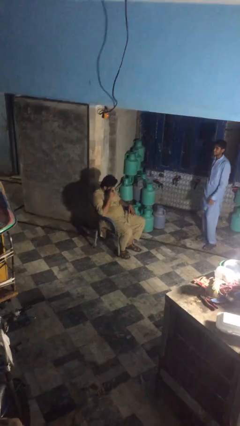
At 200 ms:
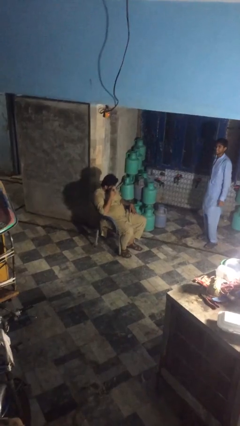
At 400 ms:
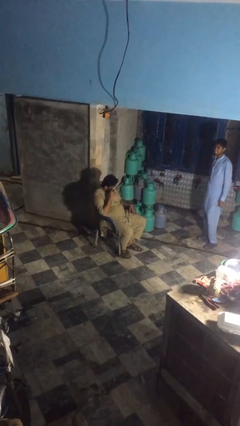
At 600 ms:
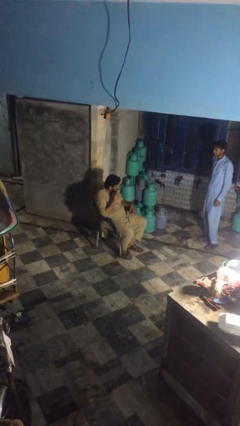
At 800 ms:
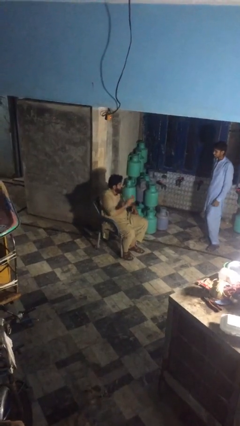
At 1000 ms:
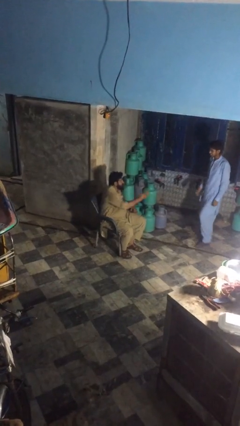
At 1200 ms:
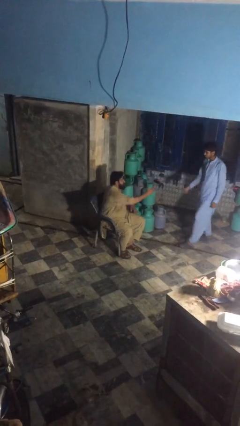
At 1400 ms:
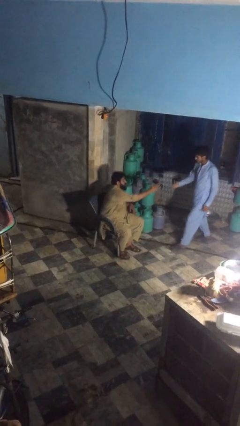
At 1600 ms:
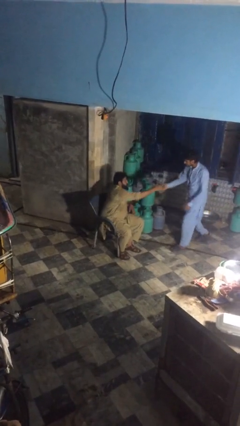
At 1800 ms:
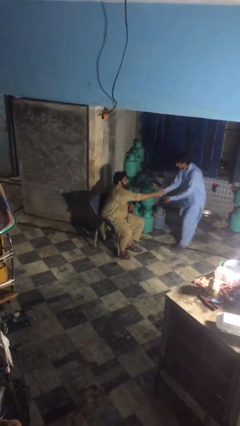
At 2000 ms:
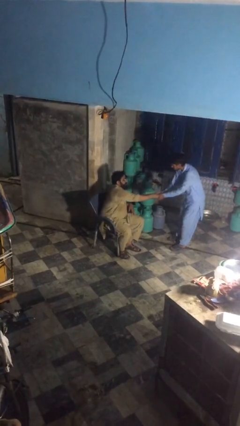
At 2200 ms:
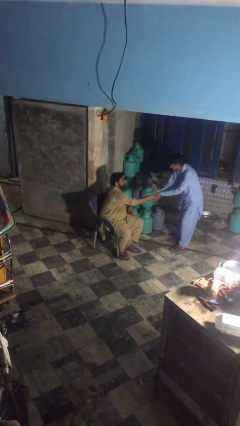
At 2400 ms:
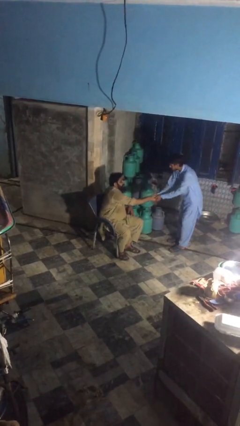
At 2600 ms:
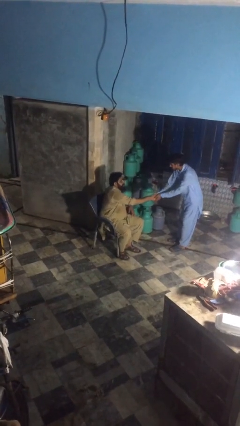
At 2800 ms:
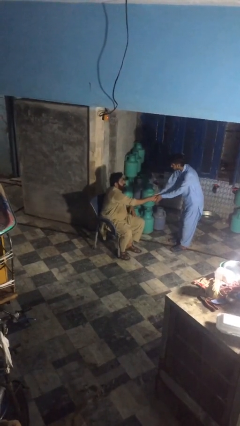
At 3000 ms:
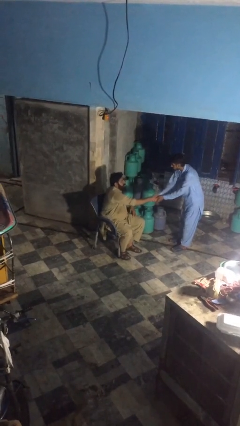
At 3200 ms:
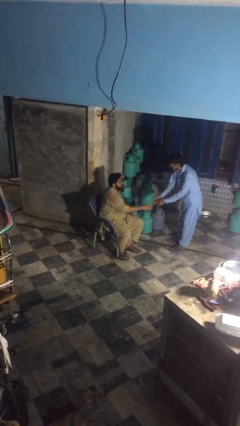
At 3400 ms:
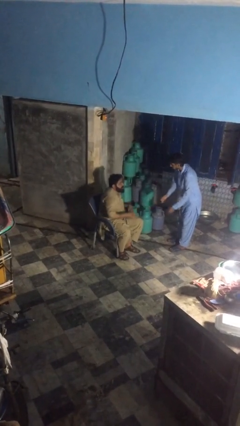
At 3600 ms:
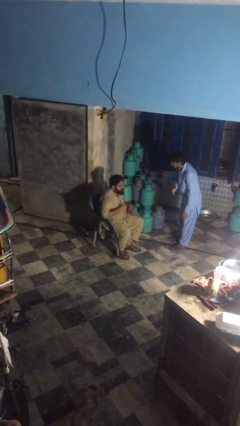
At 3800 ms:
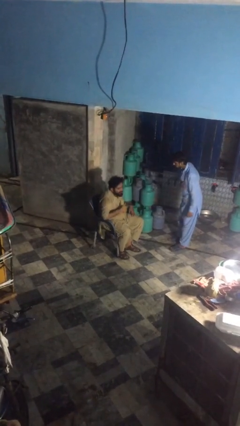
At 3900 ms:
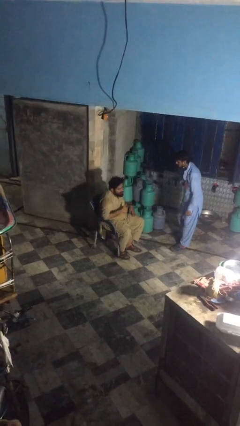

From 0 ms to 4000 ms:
person shakes hand

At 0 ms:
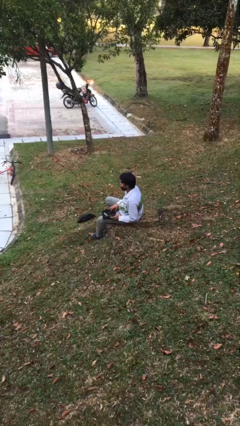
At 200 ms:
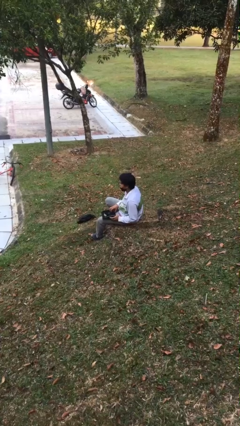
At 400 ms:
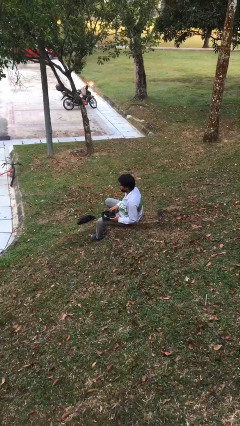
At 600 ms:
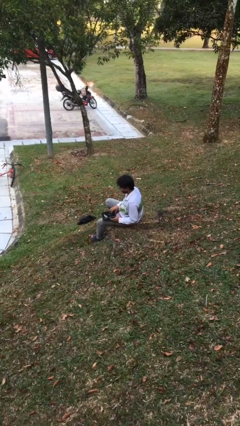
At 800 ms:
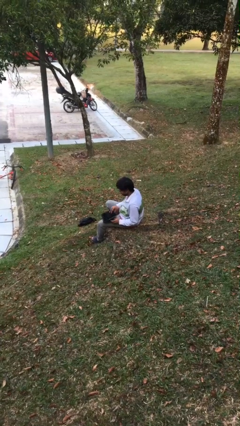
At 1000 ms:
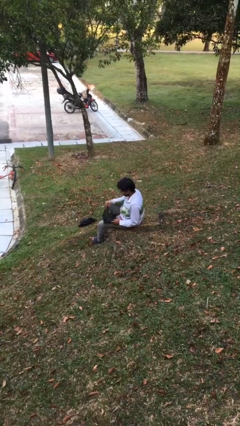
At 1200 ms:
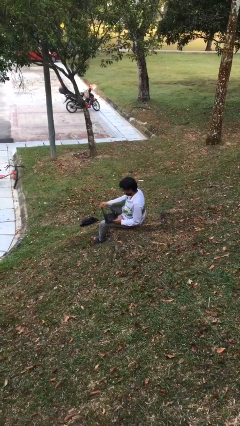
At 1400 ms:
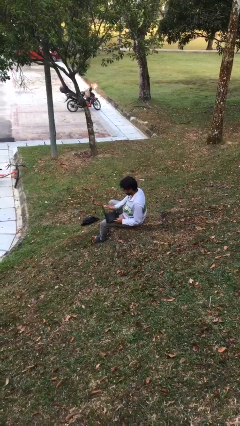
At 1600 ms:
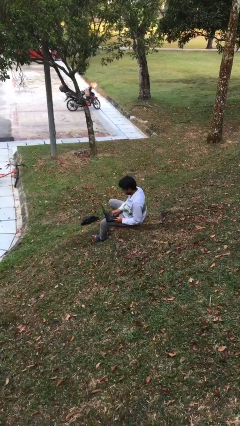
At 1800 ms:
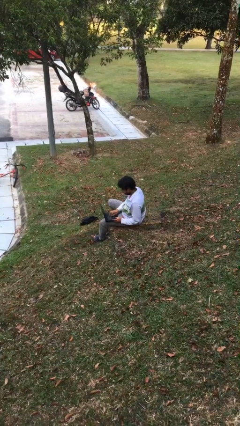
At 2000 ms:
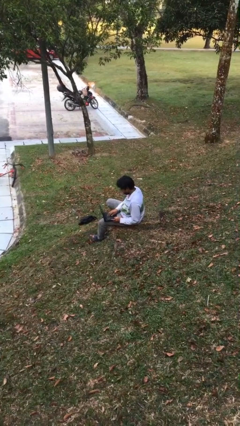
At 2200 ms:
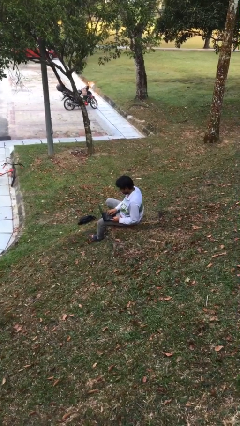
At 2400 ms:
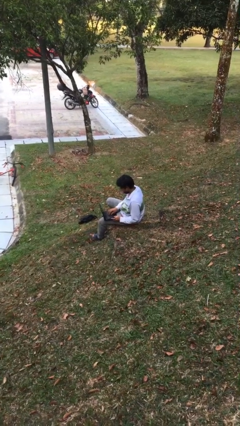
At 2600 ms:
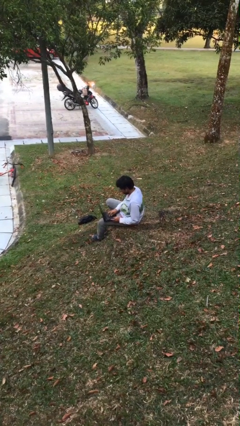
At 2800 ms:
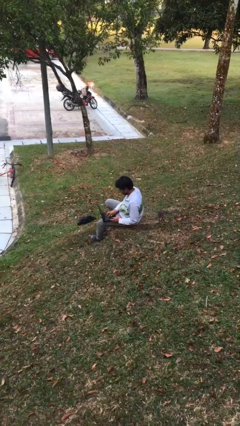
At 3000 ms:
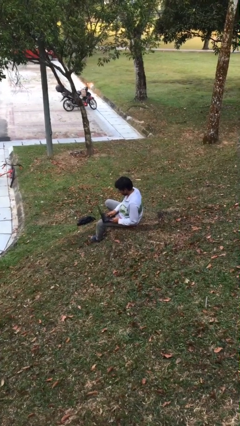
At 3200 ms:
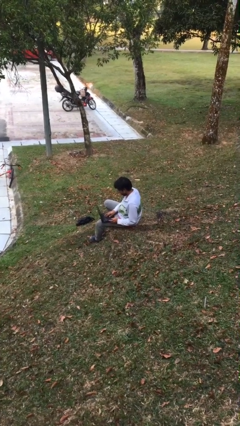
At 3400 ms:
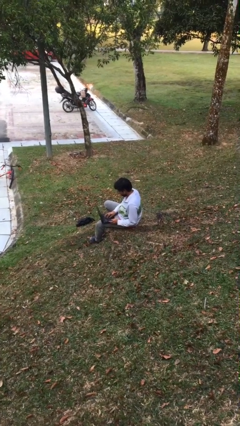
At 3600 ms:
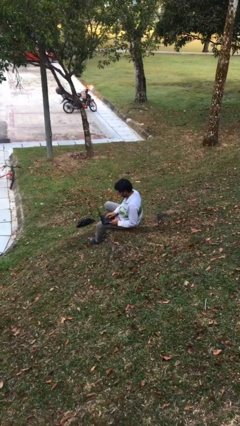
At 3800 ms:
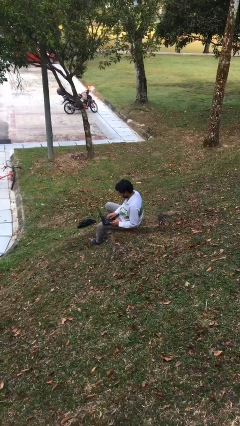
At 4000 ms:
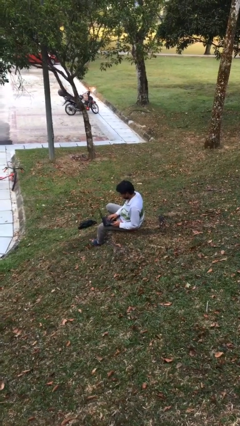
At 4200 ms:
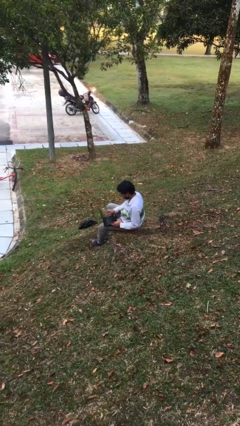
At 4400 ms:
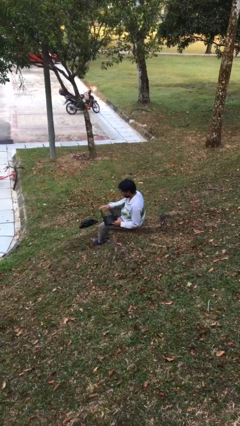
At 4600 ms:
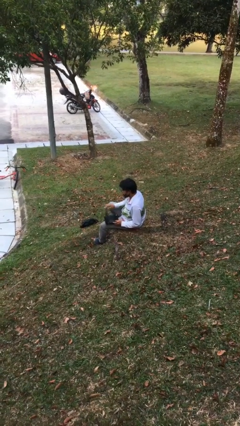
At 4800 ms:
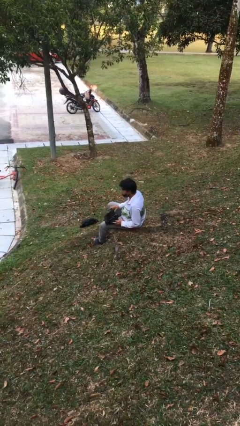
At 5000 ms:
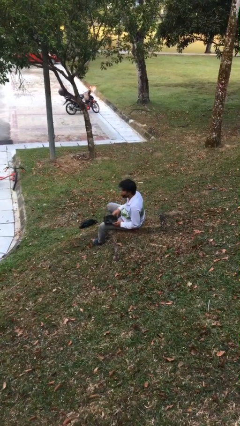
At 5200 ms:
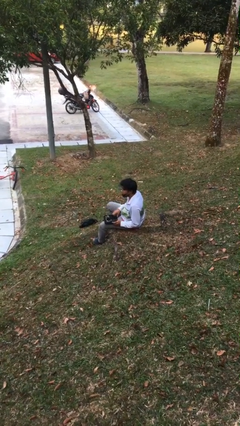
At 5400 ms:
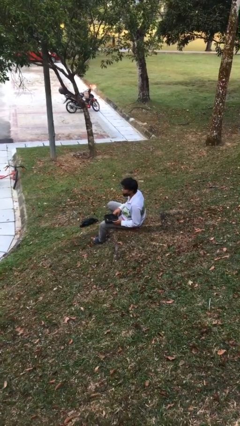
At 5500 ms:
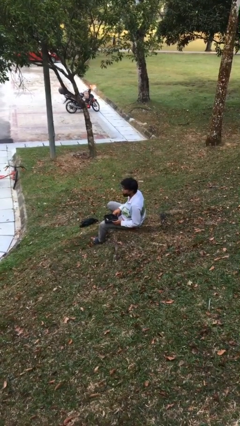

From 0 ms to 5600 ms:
person interacts with laptop

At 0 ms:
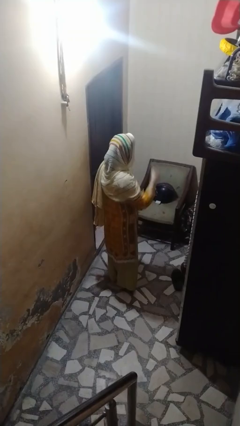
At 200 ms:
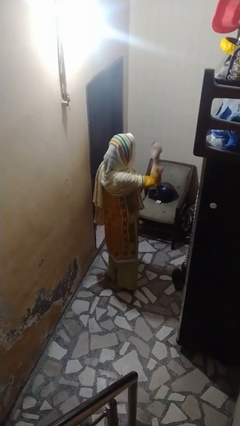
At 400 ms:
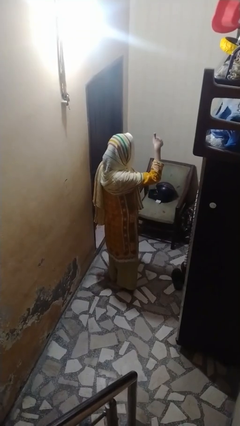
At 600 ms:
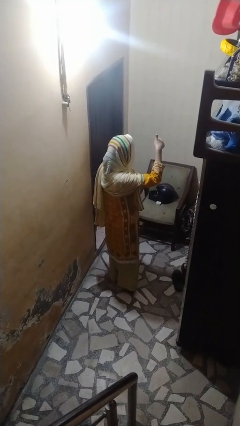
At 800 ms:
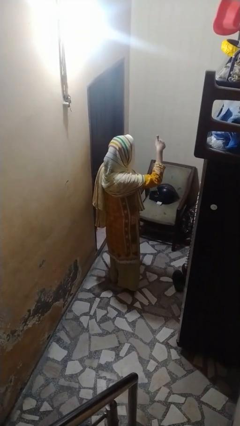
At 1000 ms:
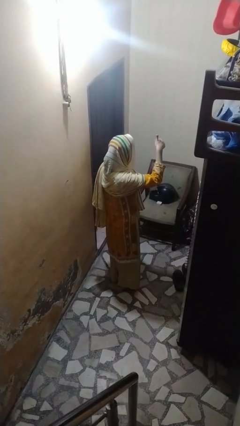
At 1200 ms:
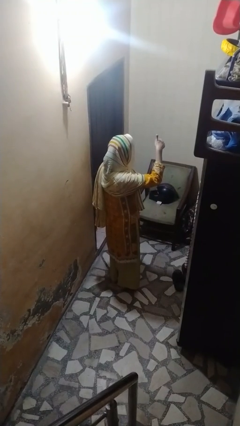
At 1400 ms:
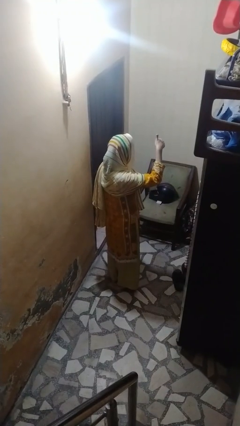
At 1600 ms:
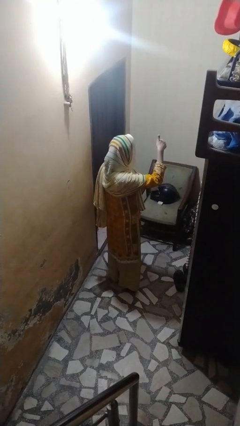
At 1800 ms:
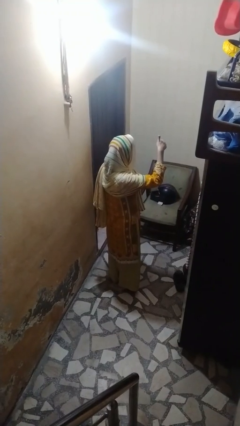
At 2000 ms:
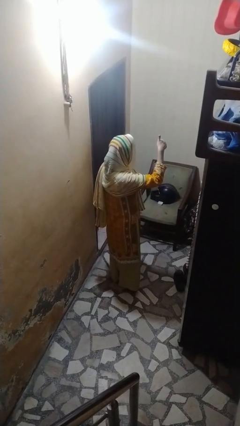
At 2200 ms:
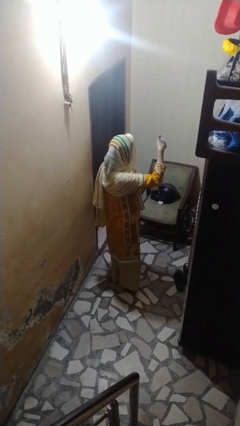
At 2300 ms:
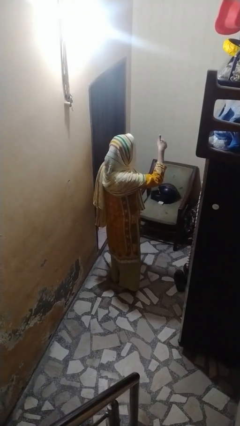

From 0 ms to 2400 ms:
person gestures thumbs up

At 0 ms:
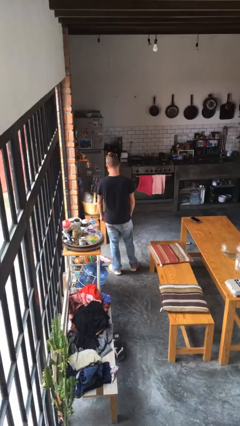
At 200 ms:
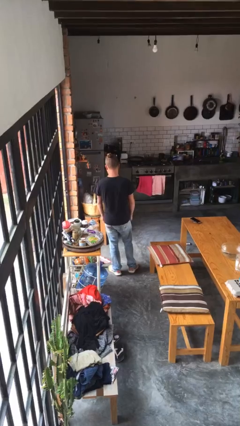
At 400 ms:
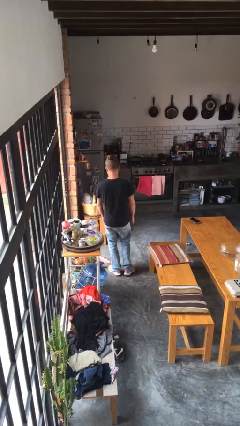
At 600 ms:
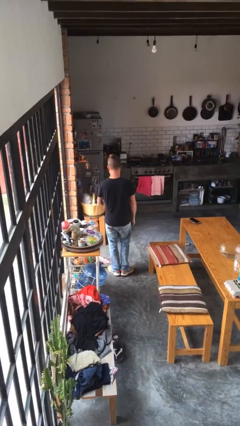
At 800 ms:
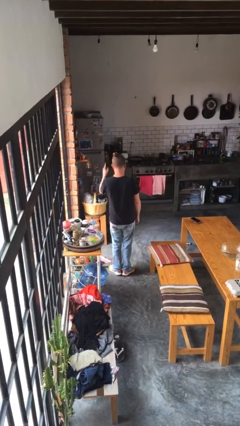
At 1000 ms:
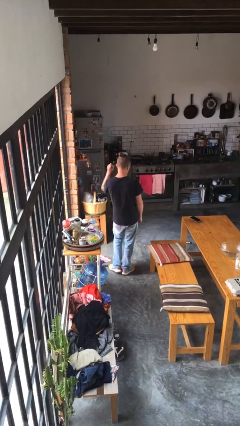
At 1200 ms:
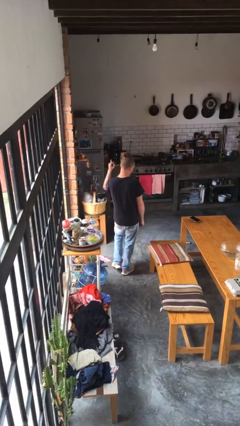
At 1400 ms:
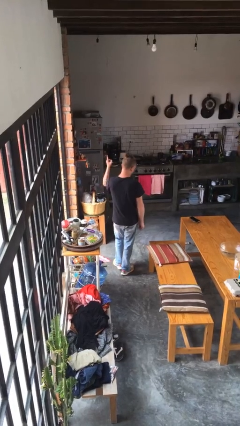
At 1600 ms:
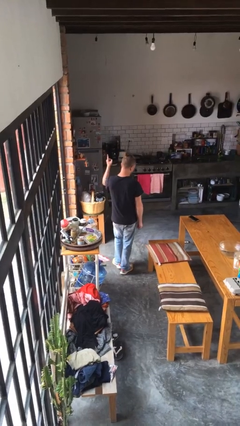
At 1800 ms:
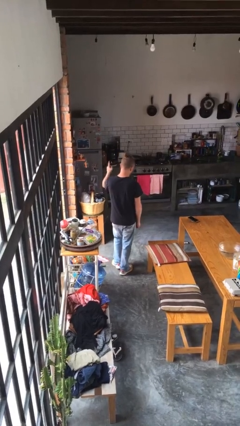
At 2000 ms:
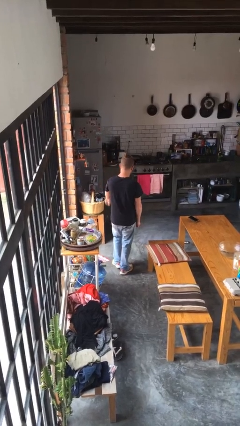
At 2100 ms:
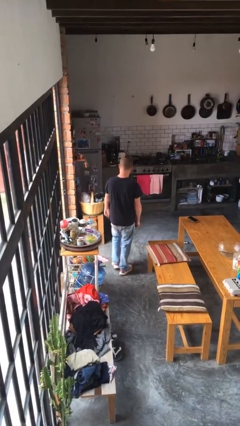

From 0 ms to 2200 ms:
person gestures number one

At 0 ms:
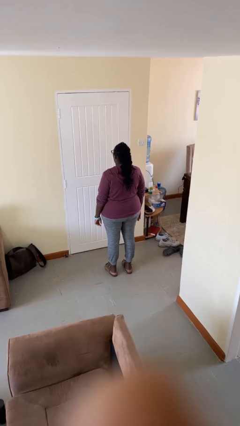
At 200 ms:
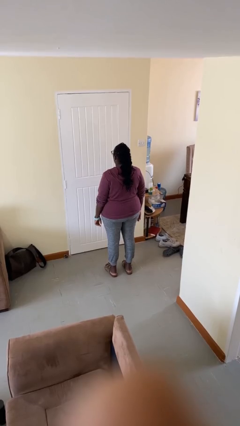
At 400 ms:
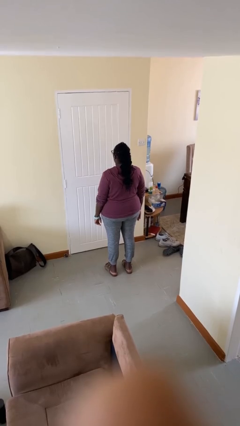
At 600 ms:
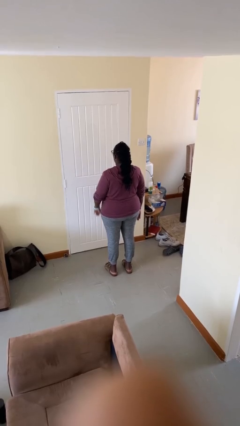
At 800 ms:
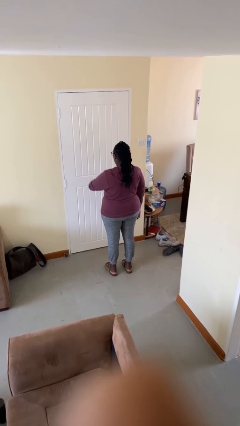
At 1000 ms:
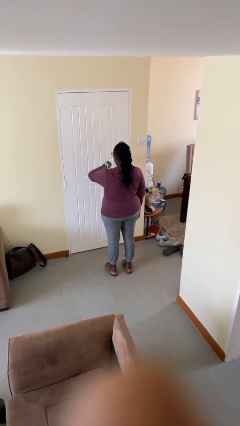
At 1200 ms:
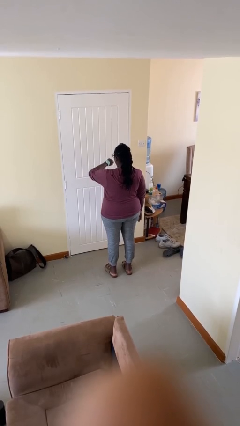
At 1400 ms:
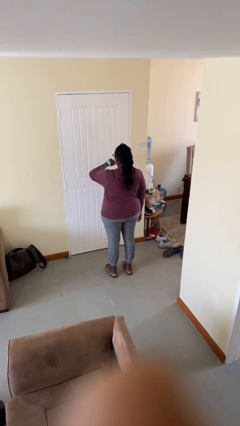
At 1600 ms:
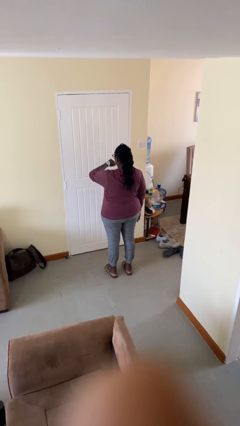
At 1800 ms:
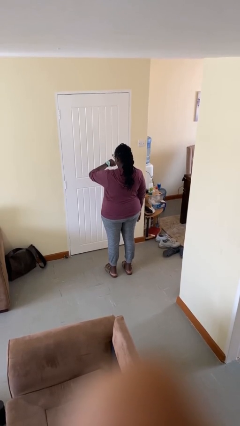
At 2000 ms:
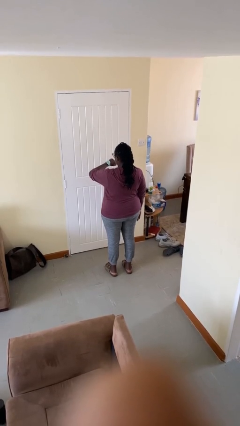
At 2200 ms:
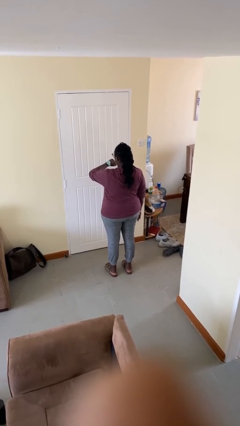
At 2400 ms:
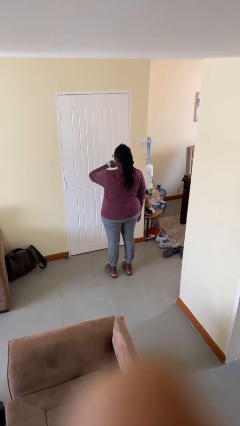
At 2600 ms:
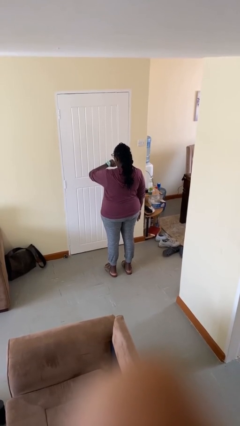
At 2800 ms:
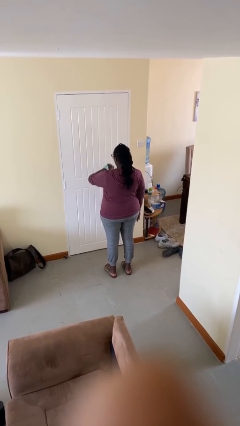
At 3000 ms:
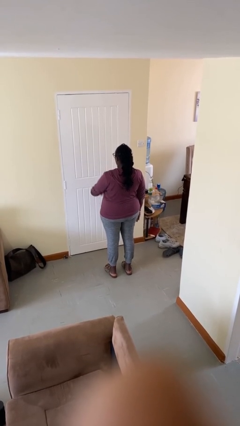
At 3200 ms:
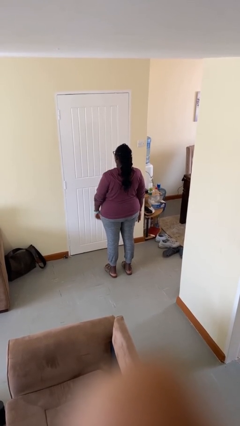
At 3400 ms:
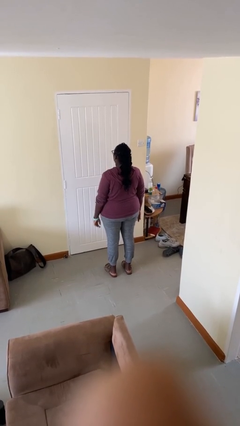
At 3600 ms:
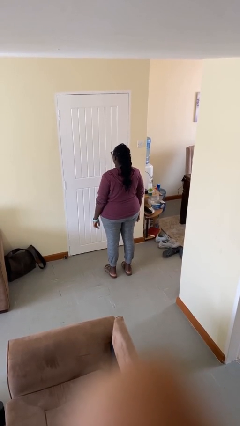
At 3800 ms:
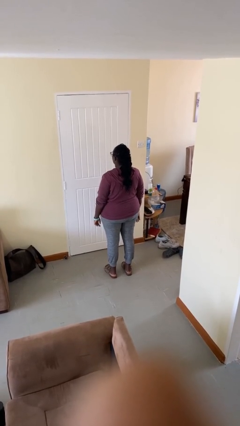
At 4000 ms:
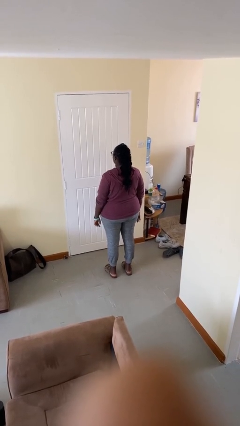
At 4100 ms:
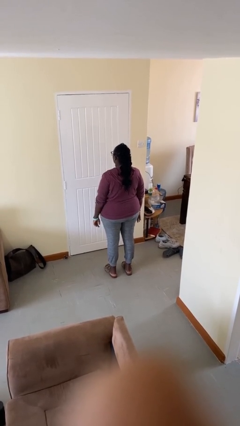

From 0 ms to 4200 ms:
person looks at wristwatch
